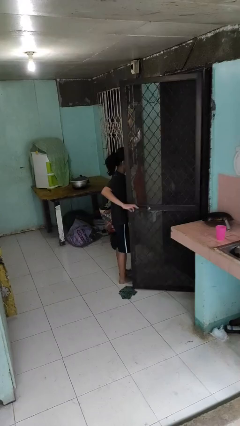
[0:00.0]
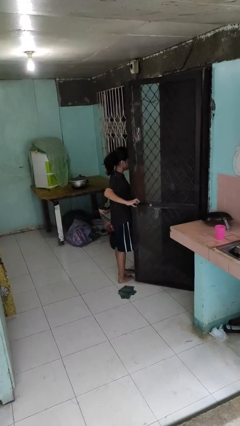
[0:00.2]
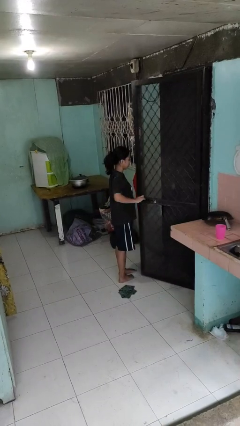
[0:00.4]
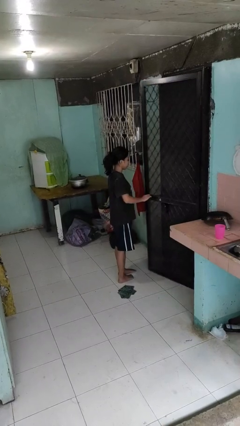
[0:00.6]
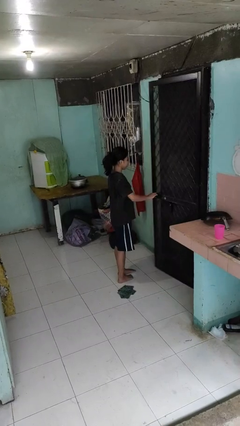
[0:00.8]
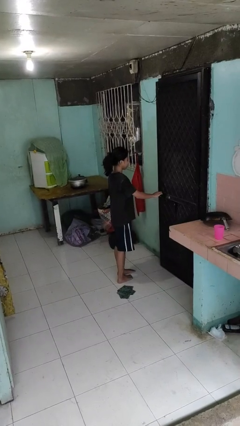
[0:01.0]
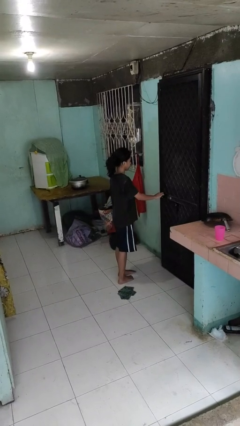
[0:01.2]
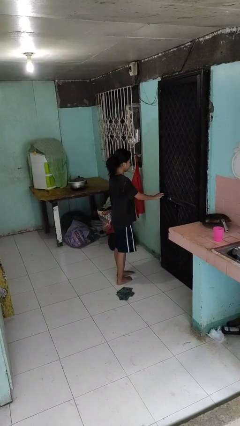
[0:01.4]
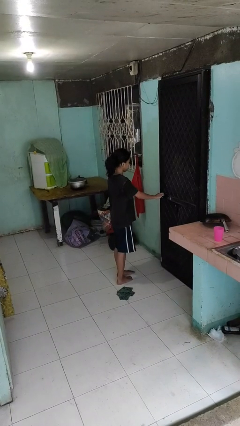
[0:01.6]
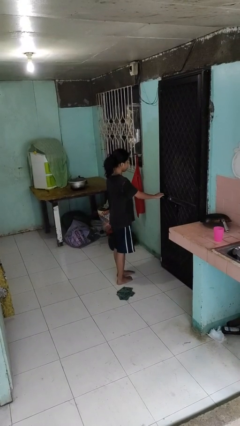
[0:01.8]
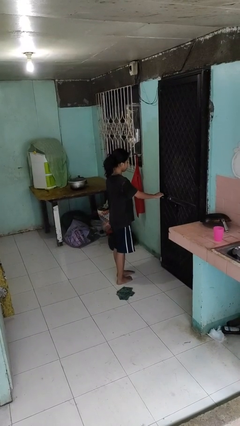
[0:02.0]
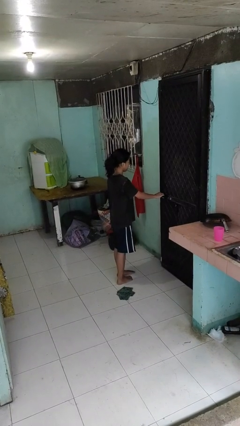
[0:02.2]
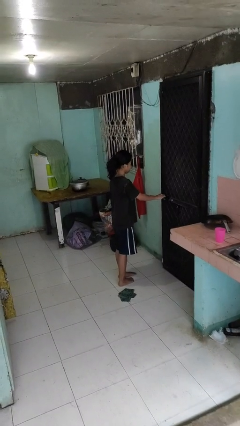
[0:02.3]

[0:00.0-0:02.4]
person closes facility door

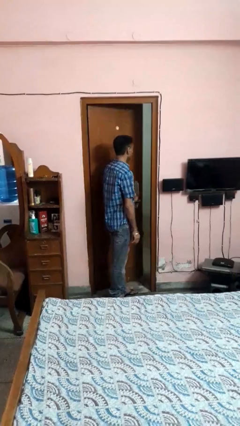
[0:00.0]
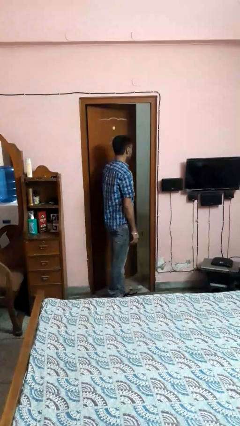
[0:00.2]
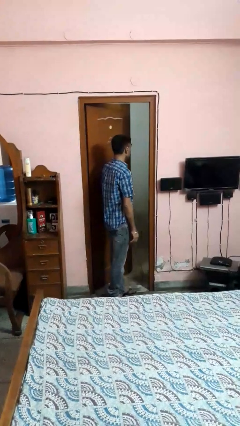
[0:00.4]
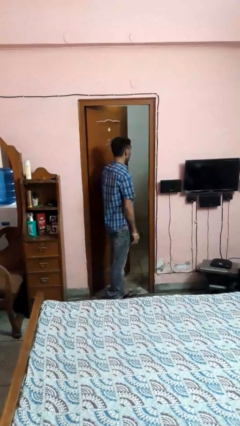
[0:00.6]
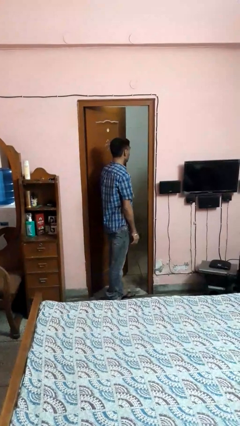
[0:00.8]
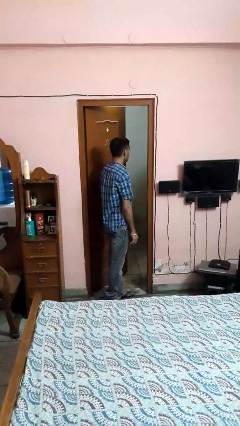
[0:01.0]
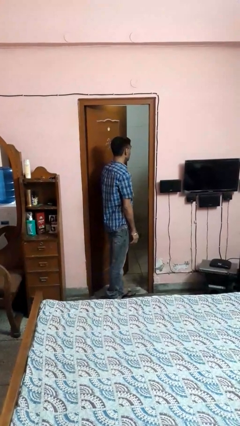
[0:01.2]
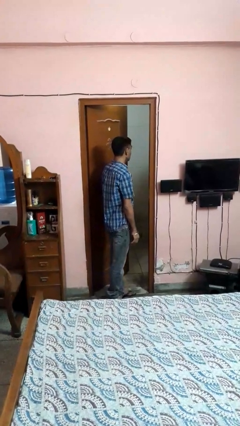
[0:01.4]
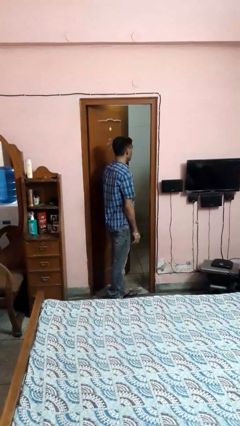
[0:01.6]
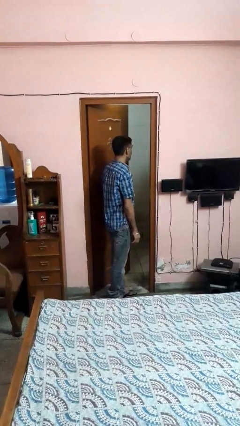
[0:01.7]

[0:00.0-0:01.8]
person opens facility door

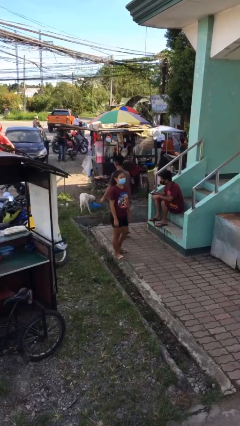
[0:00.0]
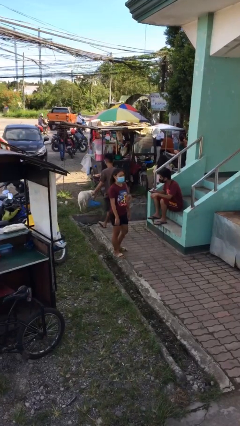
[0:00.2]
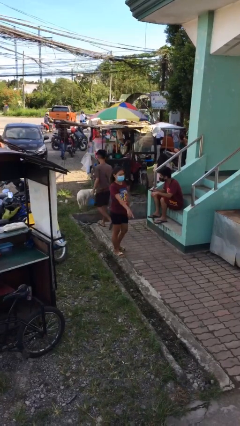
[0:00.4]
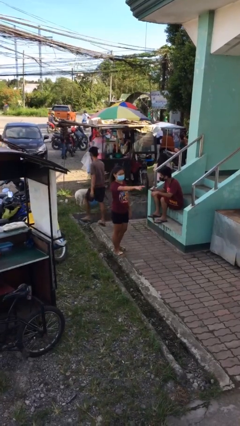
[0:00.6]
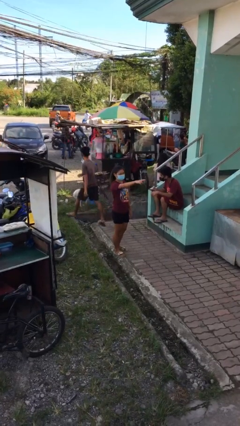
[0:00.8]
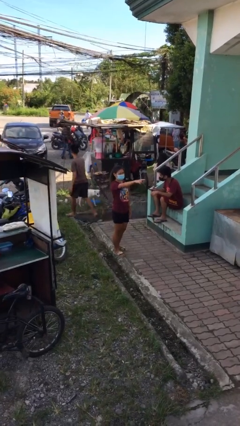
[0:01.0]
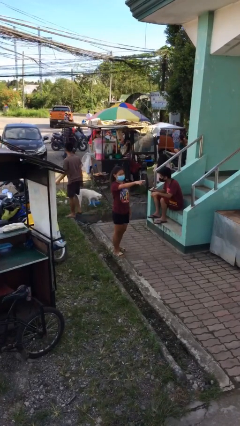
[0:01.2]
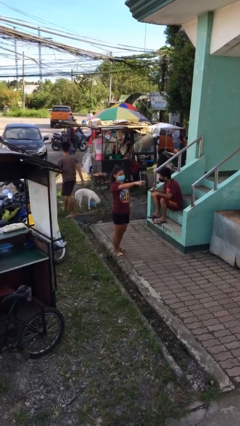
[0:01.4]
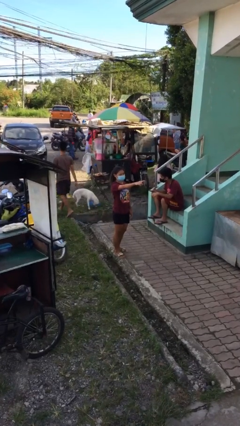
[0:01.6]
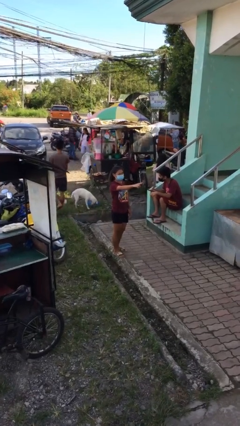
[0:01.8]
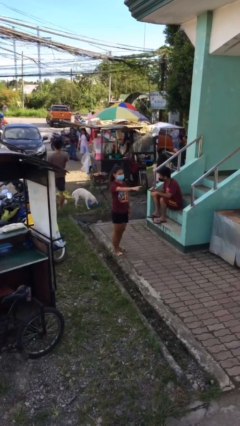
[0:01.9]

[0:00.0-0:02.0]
person points at person

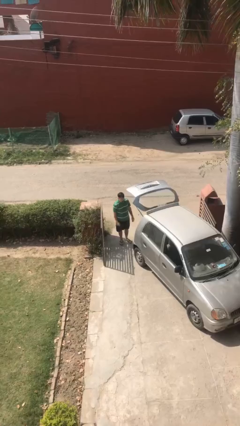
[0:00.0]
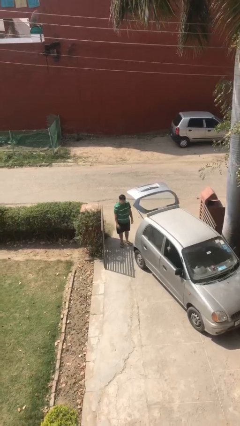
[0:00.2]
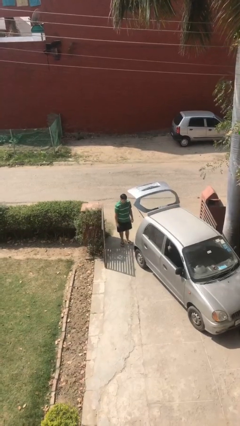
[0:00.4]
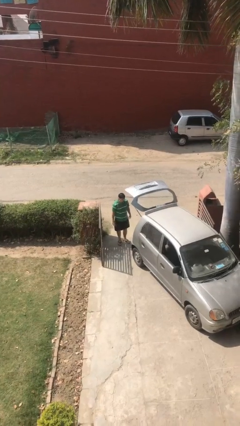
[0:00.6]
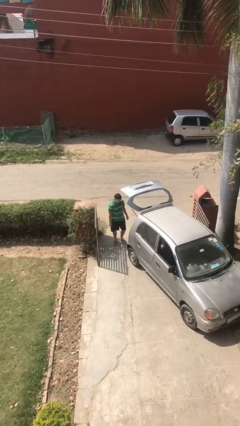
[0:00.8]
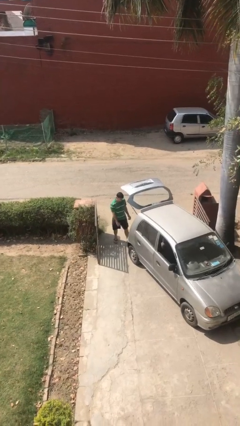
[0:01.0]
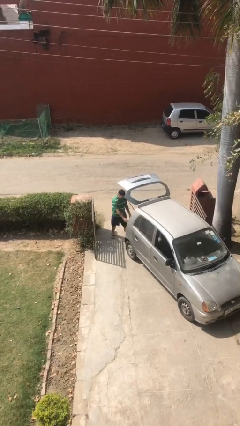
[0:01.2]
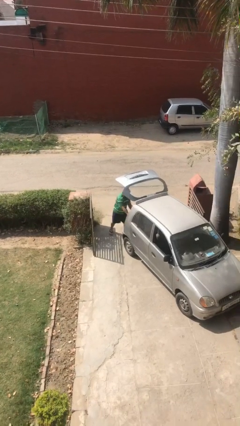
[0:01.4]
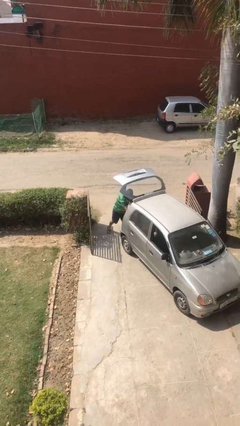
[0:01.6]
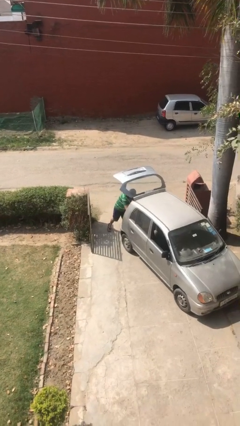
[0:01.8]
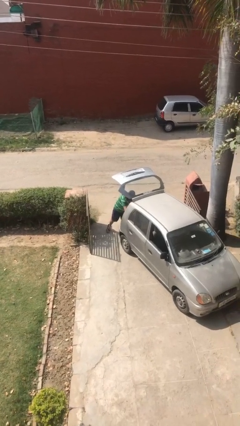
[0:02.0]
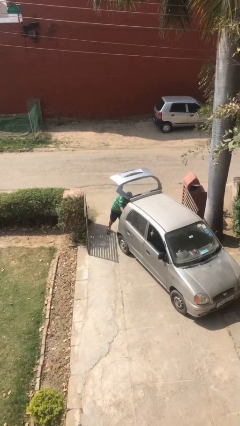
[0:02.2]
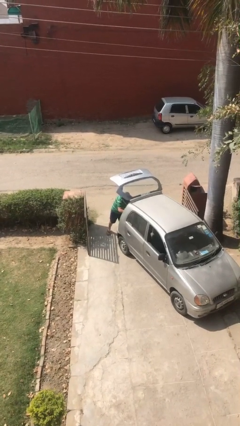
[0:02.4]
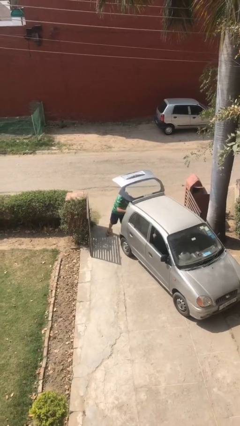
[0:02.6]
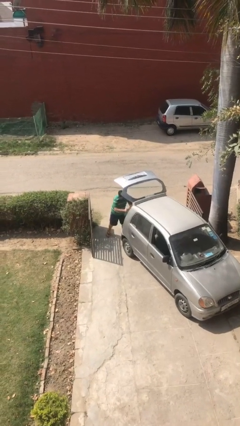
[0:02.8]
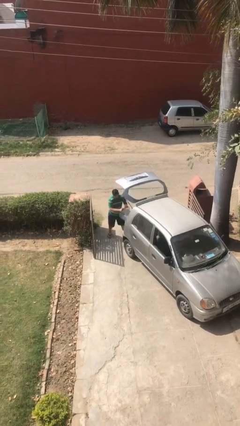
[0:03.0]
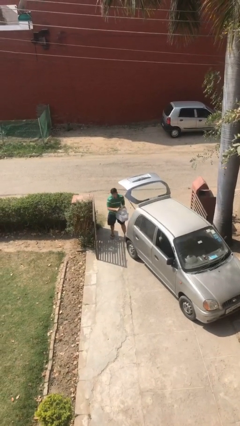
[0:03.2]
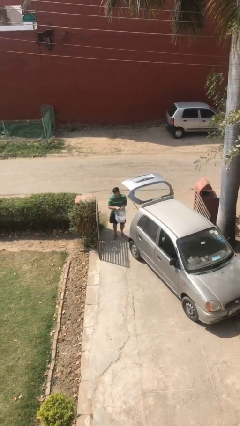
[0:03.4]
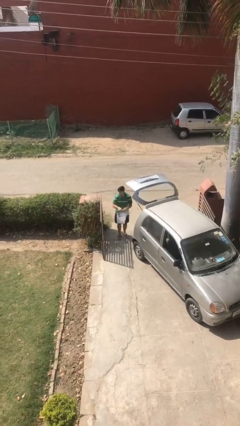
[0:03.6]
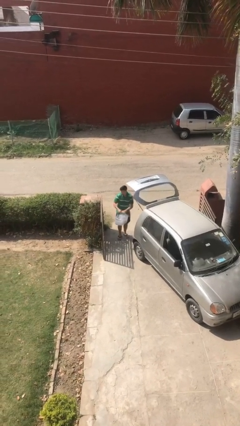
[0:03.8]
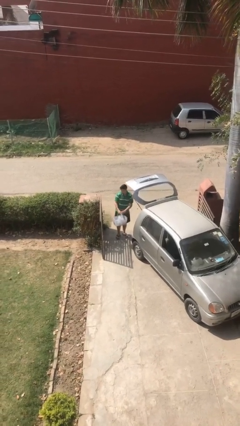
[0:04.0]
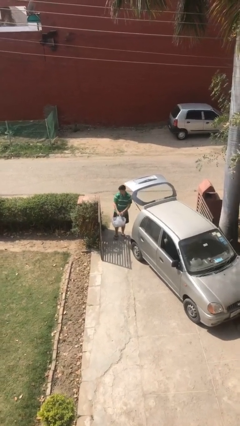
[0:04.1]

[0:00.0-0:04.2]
person unloads car

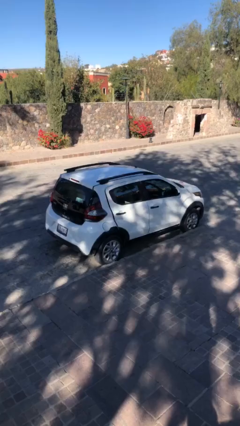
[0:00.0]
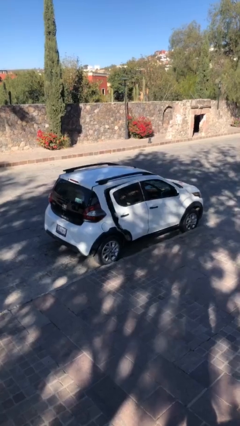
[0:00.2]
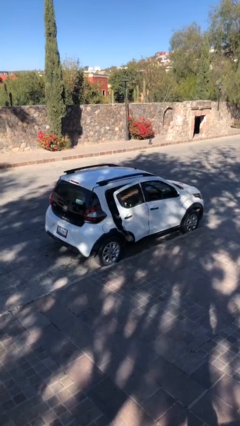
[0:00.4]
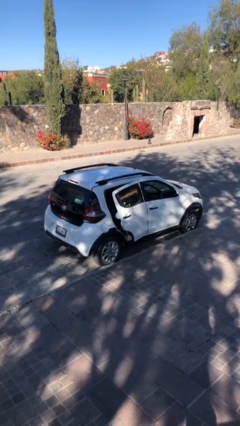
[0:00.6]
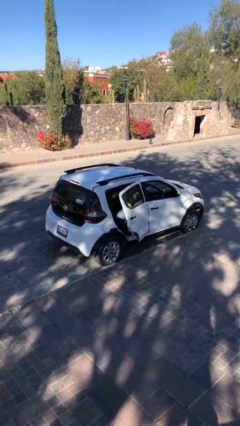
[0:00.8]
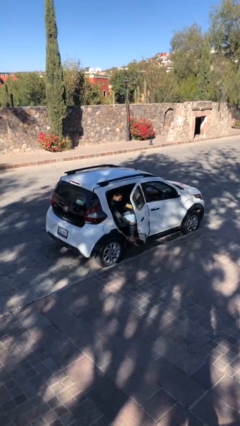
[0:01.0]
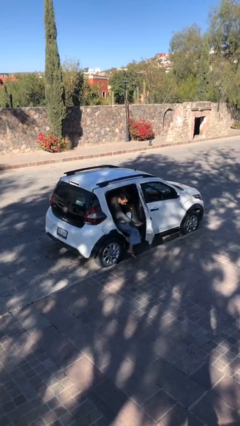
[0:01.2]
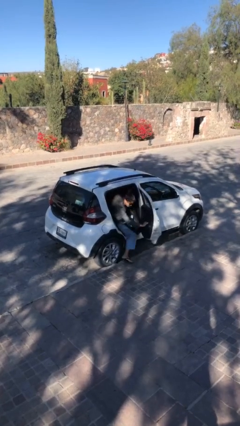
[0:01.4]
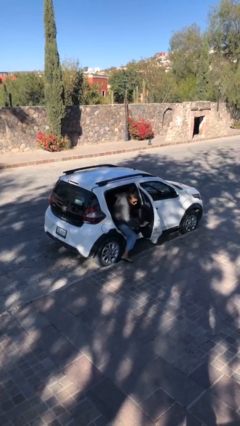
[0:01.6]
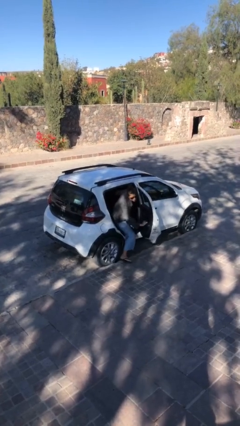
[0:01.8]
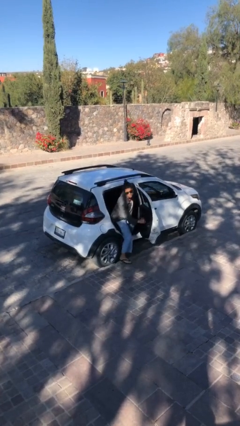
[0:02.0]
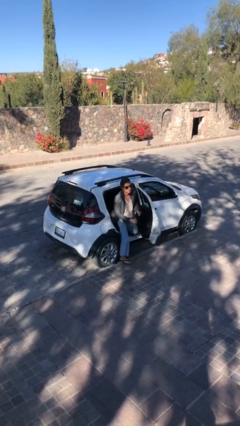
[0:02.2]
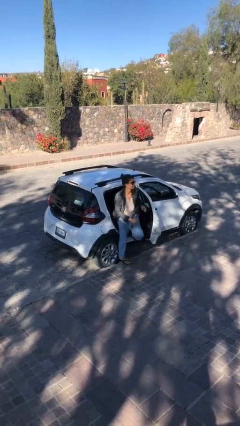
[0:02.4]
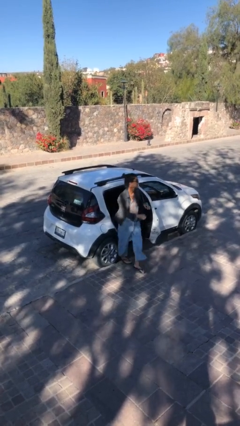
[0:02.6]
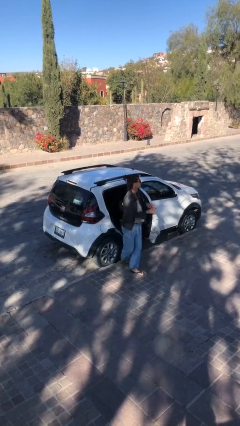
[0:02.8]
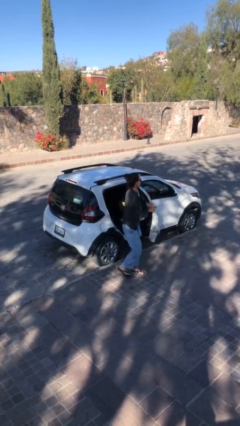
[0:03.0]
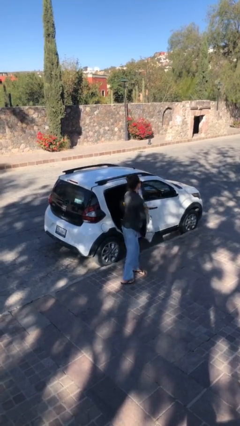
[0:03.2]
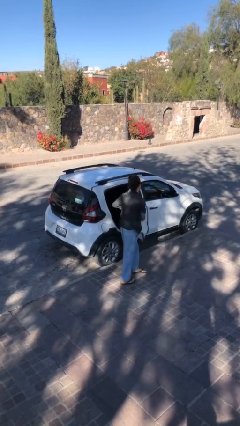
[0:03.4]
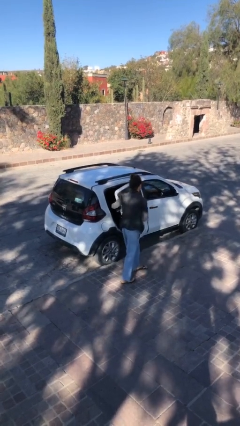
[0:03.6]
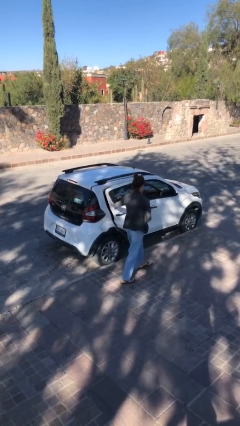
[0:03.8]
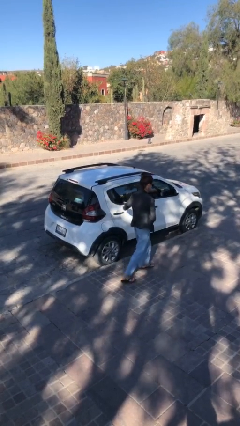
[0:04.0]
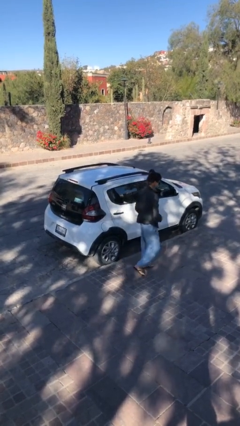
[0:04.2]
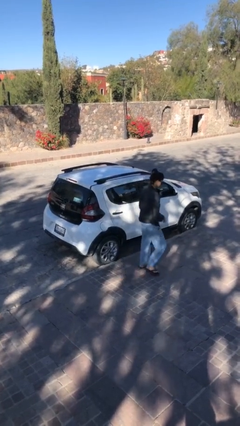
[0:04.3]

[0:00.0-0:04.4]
car drops off person

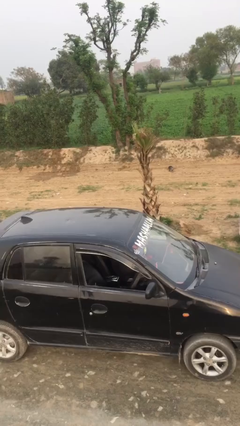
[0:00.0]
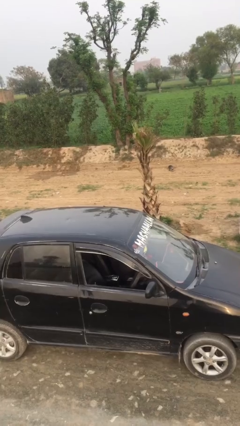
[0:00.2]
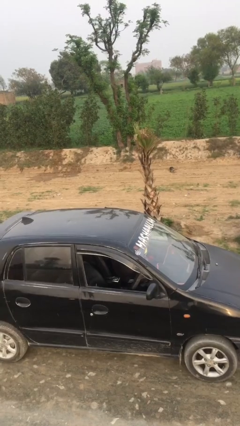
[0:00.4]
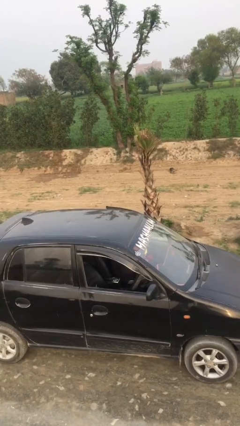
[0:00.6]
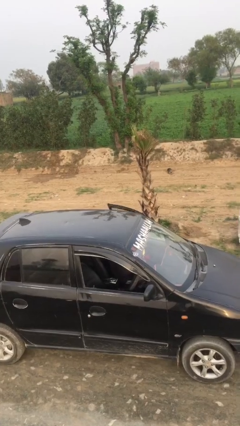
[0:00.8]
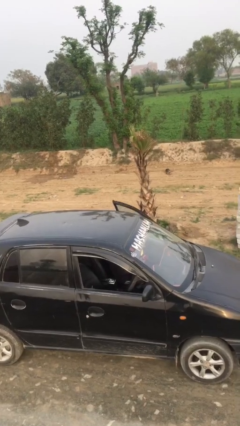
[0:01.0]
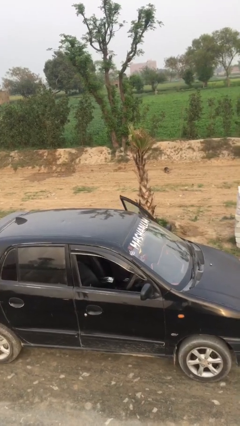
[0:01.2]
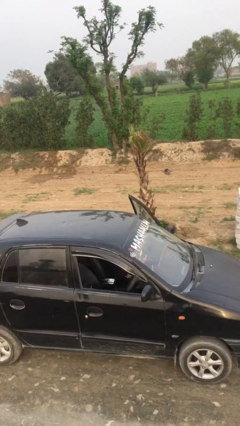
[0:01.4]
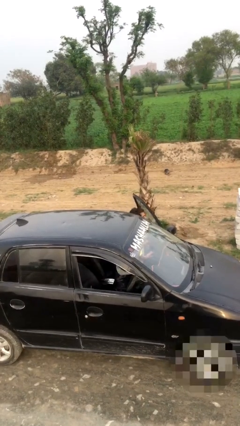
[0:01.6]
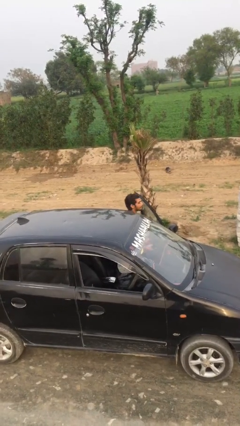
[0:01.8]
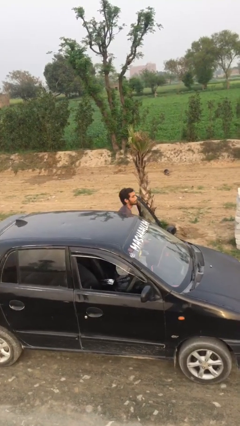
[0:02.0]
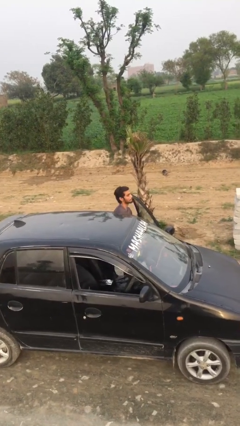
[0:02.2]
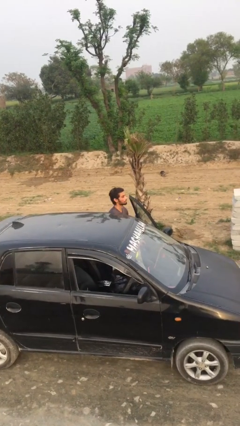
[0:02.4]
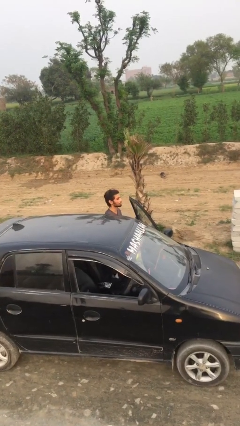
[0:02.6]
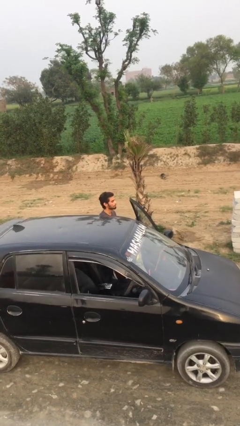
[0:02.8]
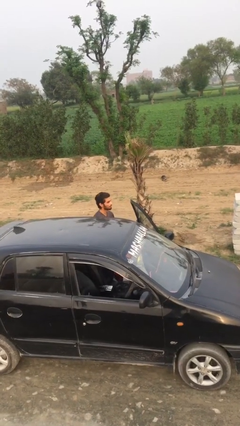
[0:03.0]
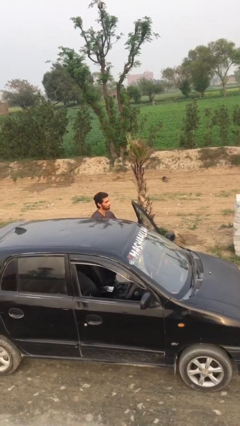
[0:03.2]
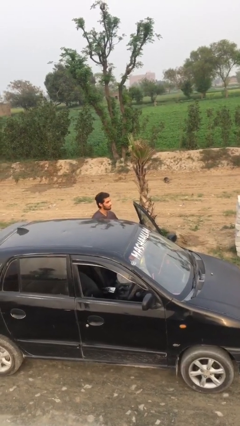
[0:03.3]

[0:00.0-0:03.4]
person exits car
